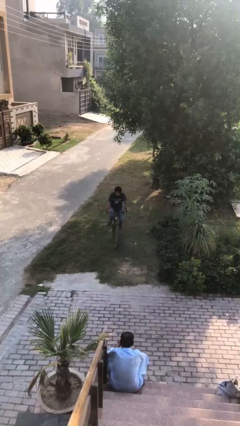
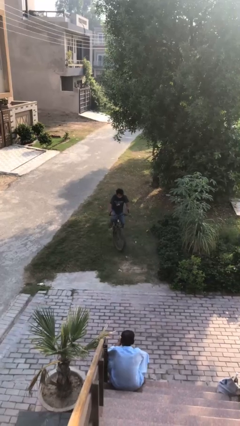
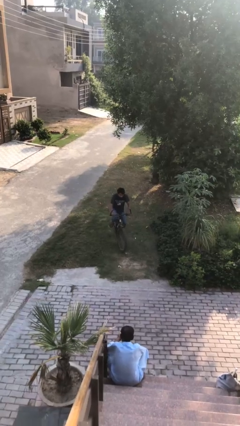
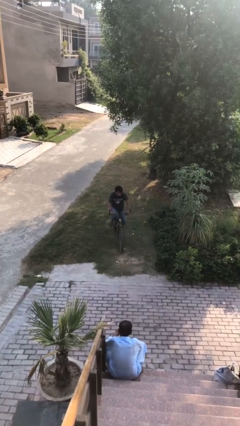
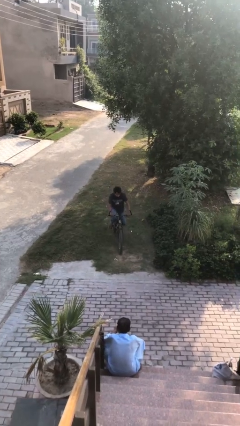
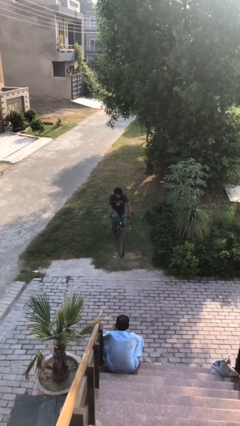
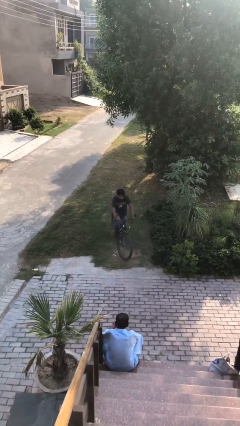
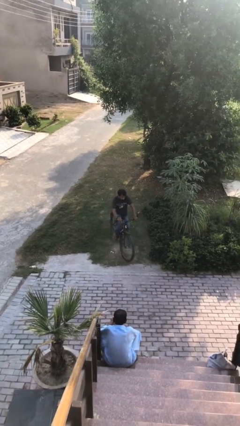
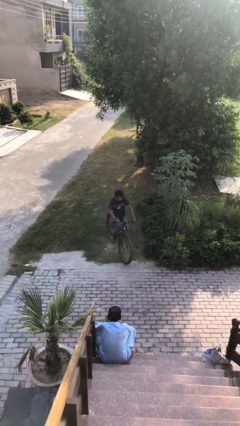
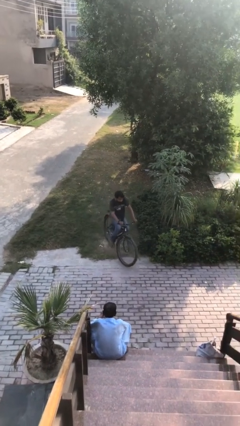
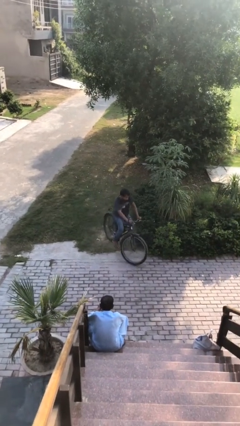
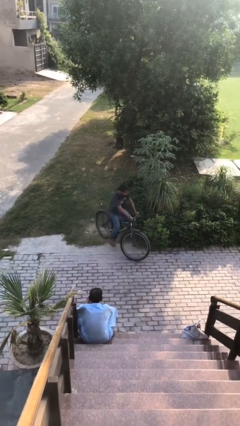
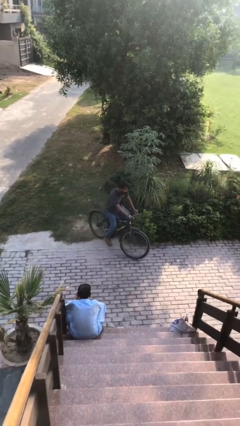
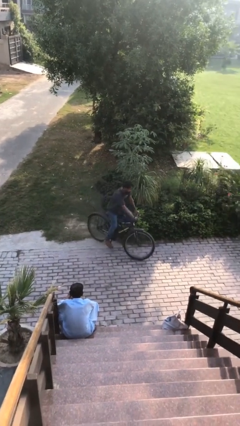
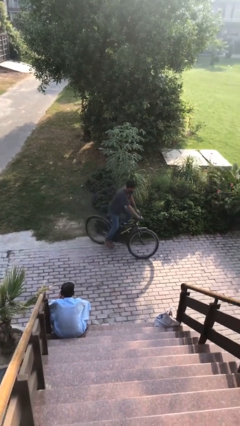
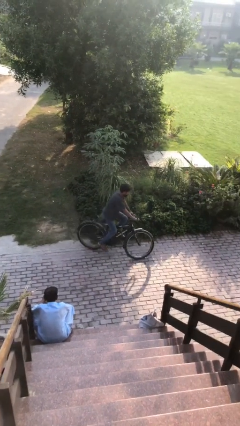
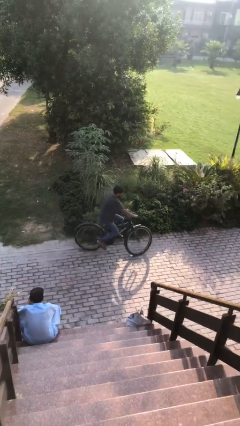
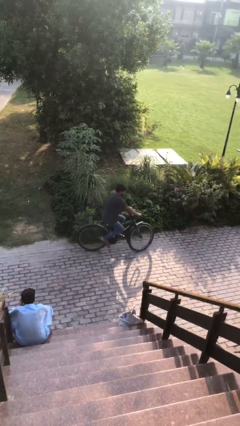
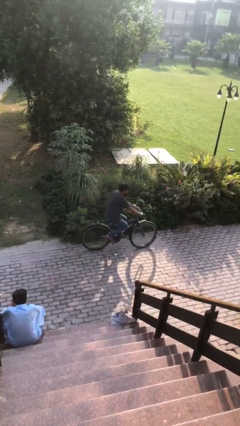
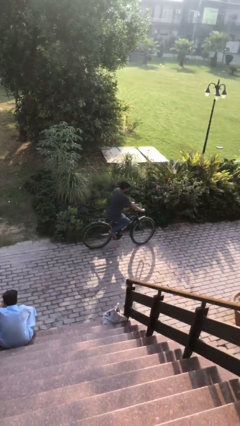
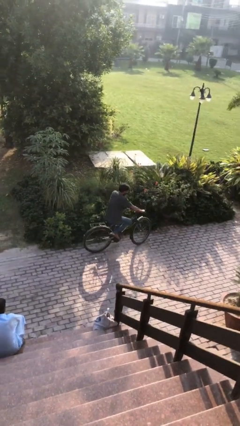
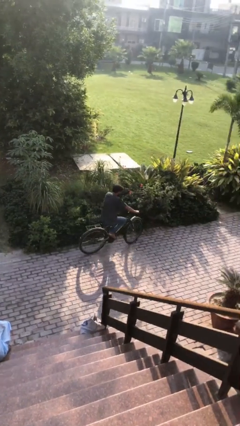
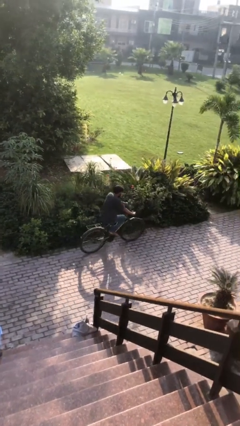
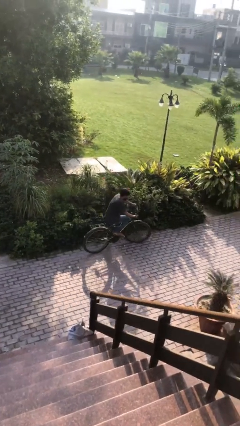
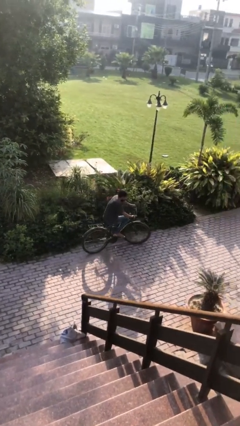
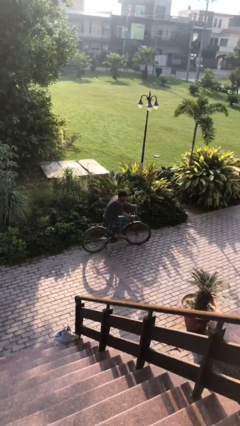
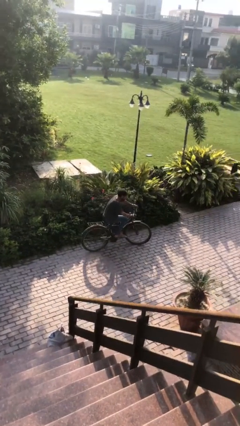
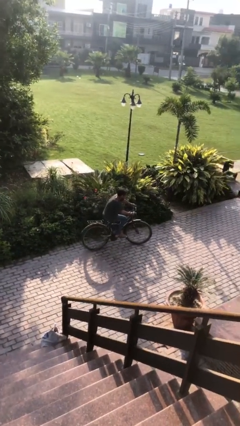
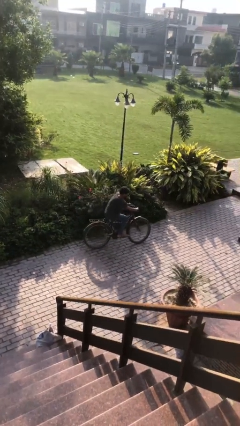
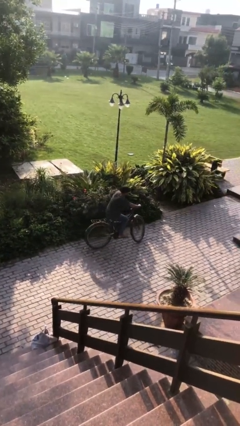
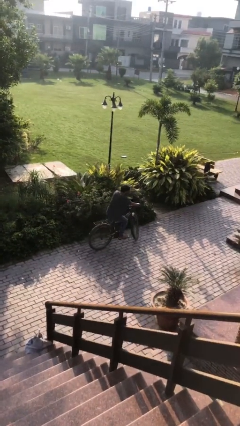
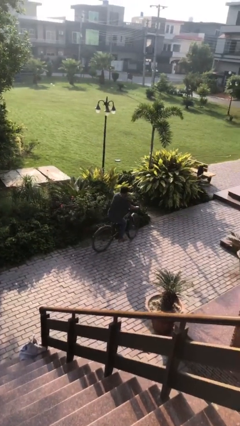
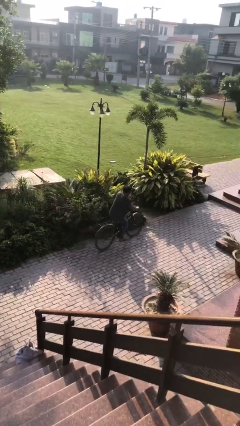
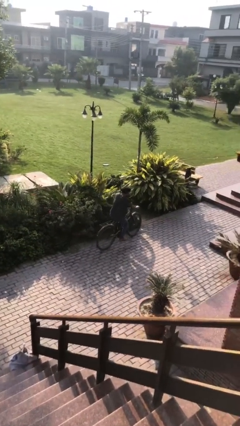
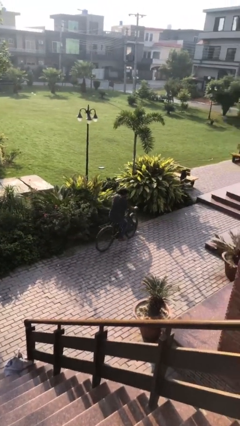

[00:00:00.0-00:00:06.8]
person rides bicycle

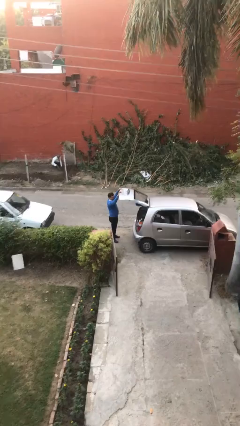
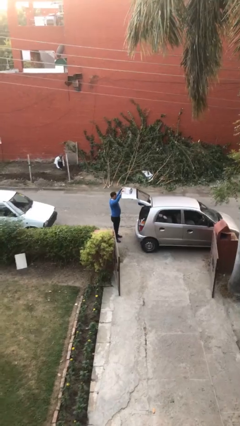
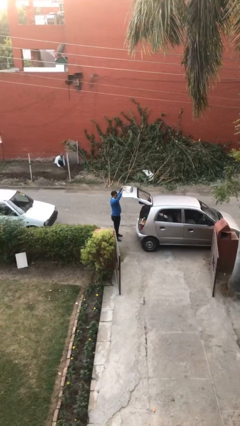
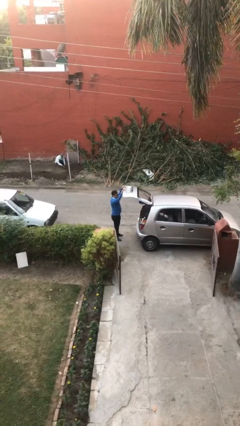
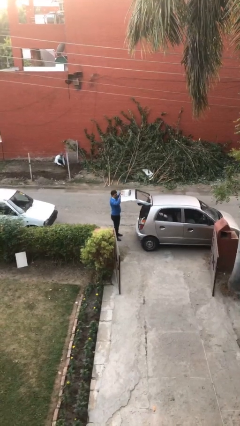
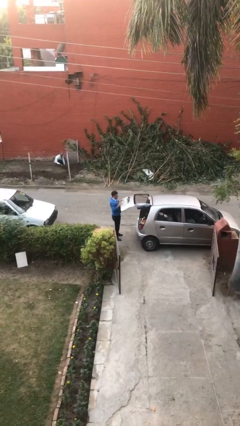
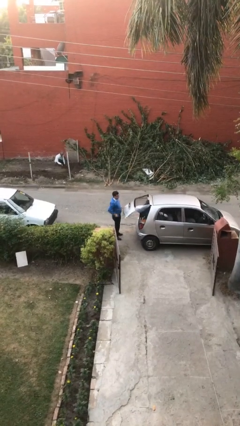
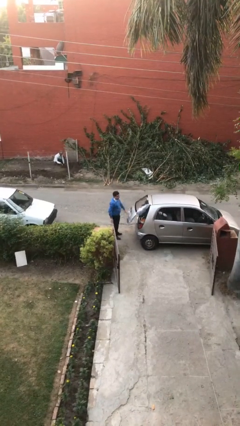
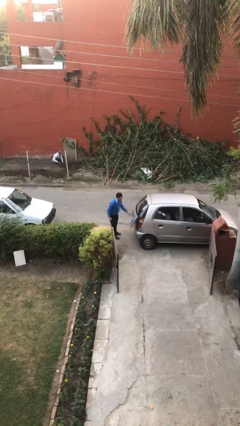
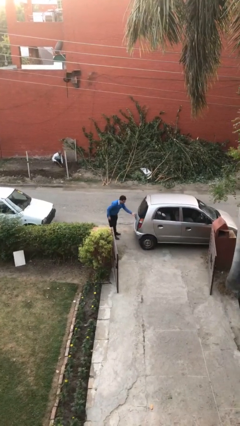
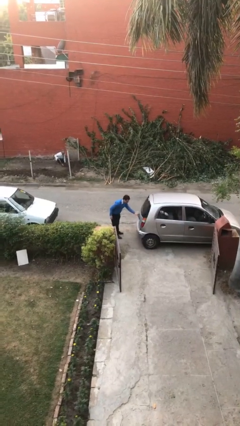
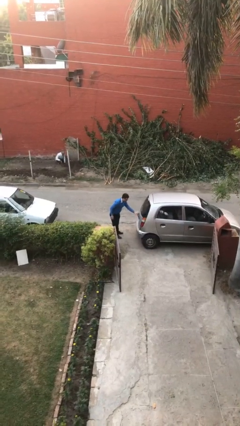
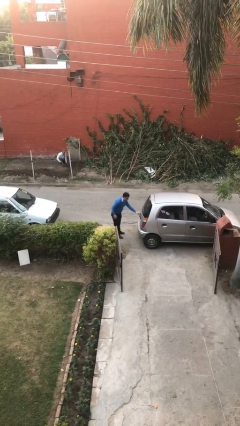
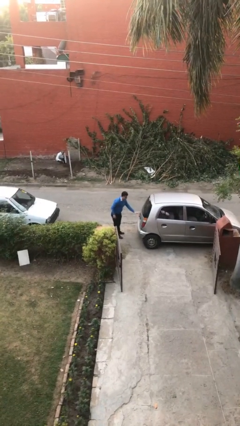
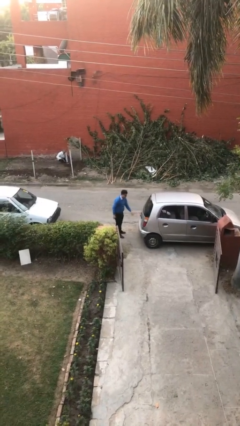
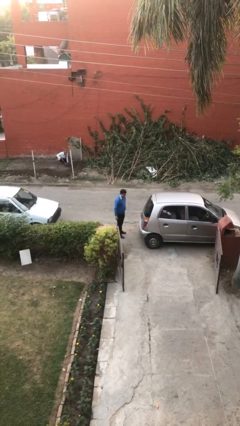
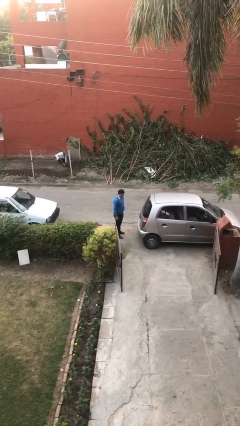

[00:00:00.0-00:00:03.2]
person closes car trunk

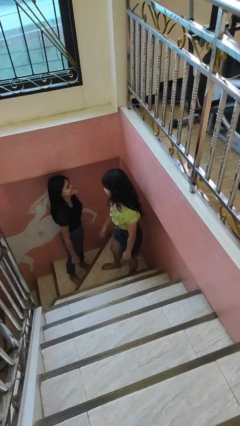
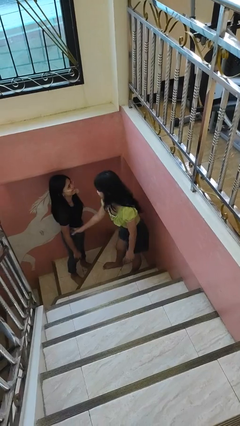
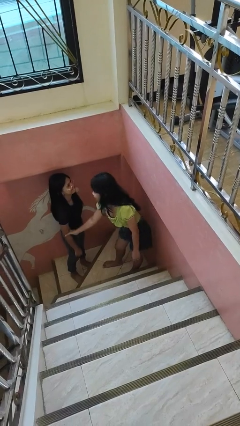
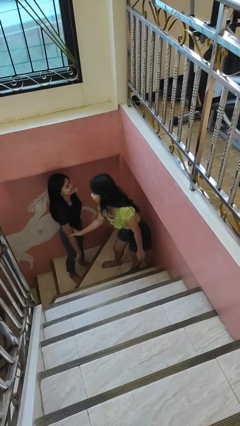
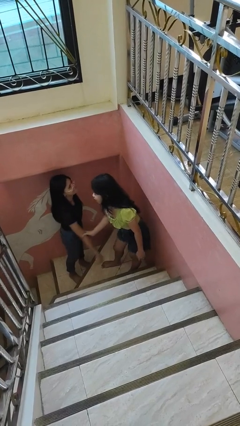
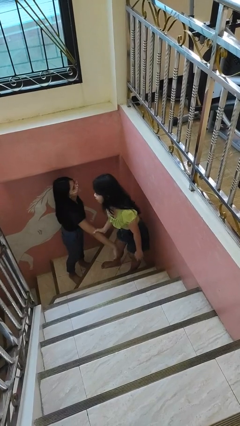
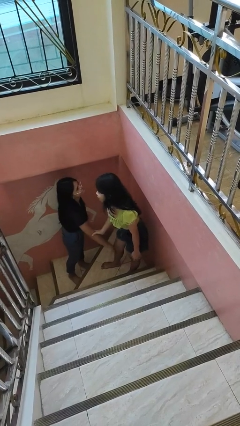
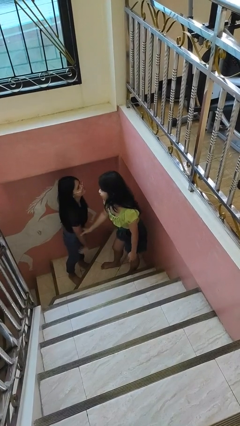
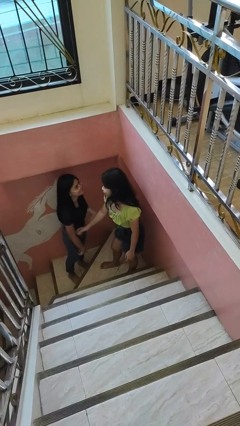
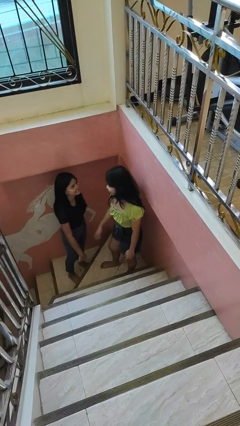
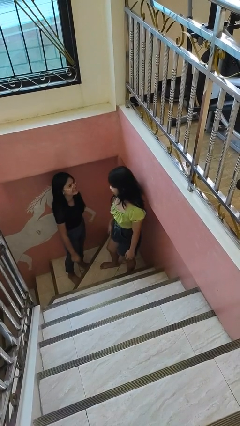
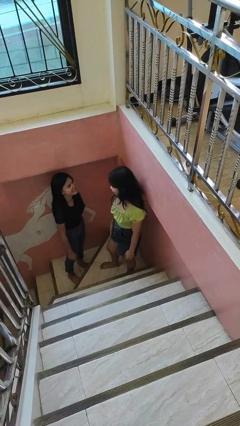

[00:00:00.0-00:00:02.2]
person grabs person by forearm

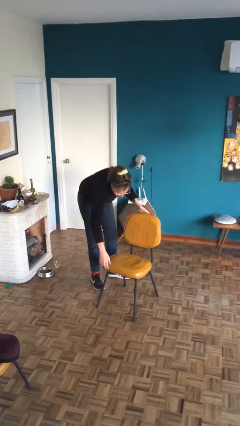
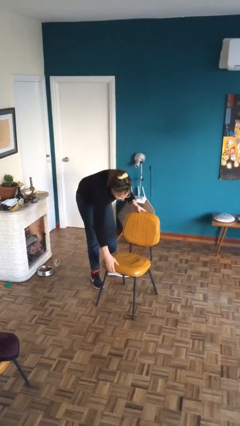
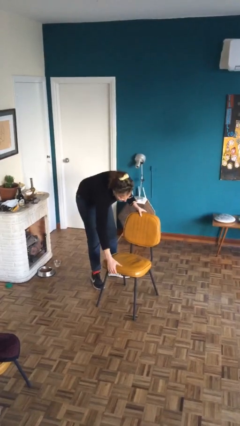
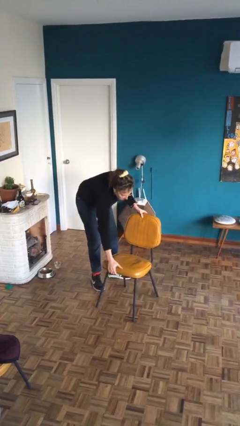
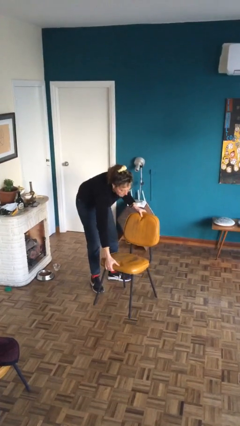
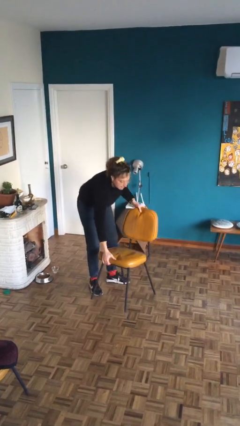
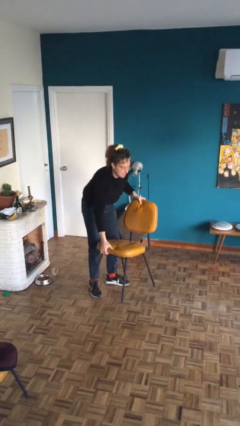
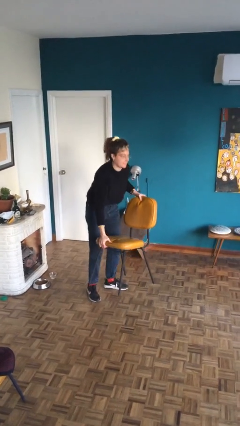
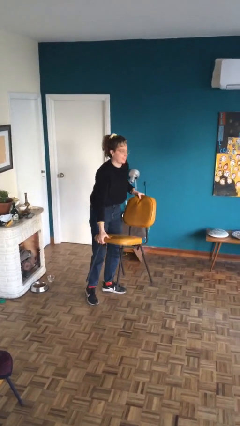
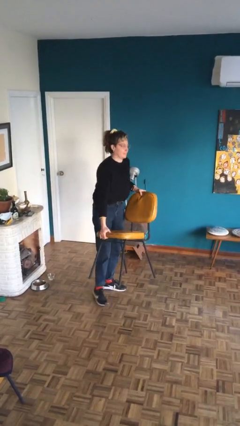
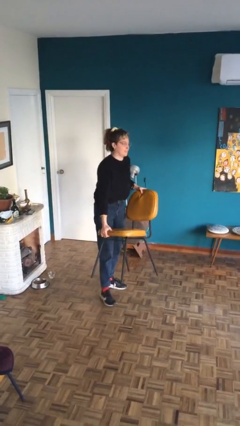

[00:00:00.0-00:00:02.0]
person picks up object from floor

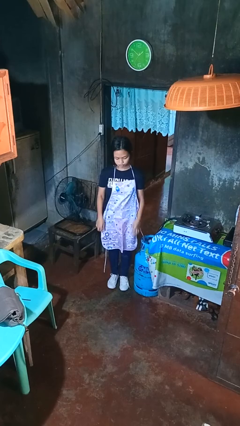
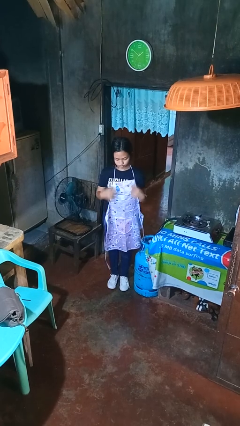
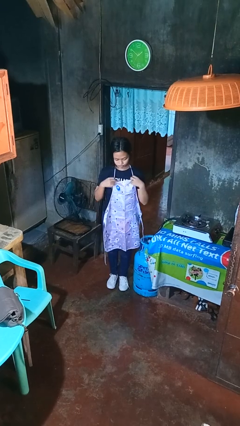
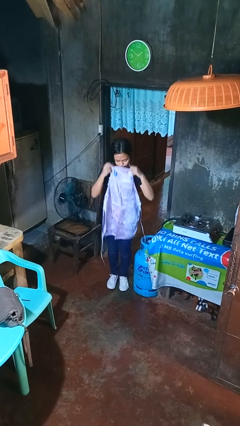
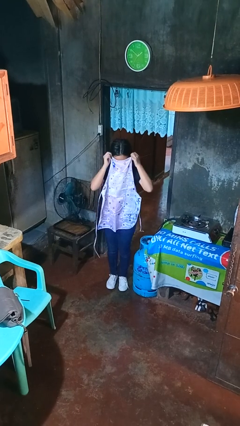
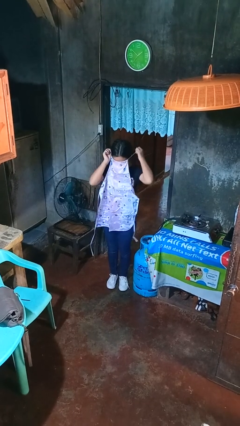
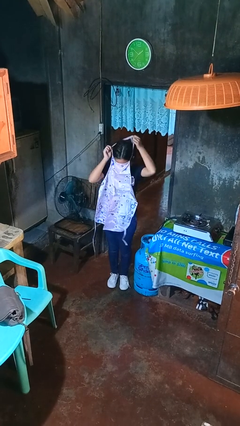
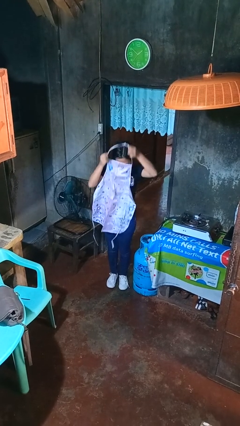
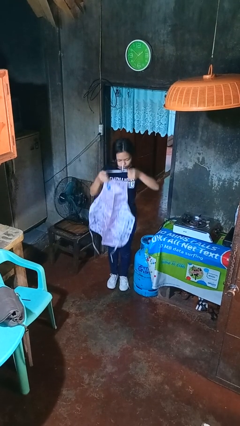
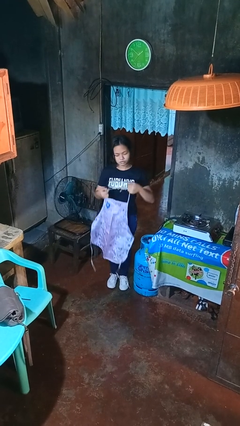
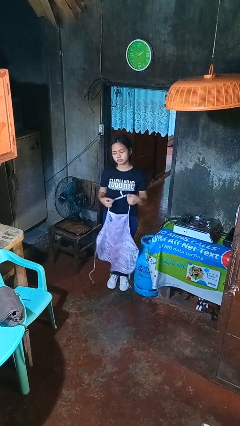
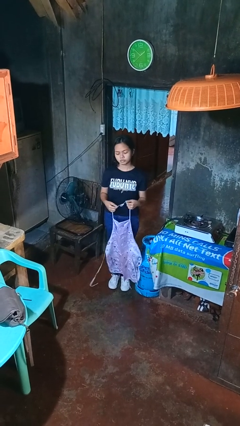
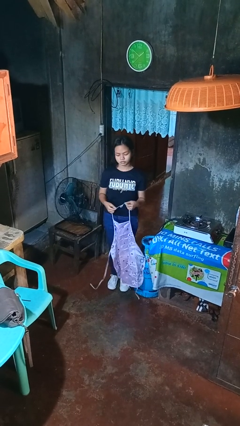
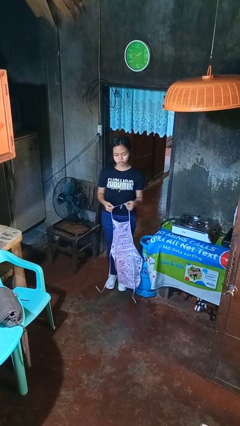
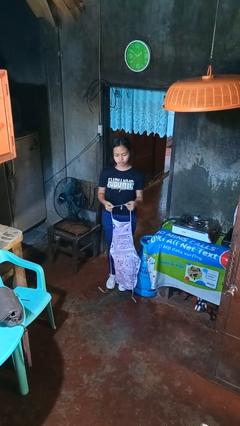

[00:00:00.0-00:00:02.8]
person takes off apron

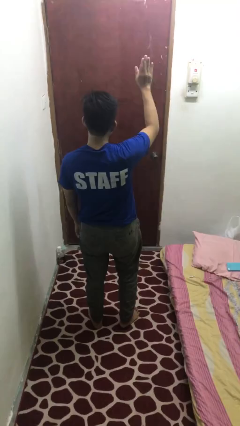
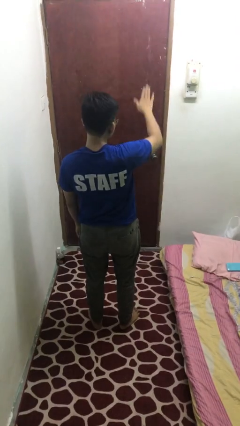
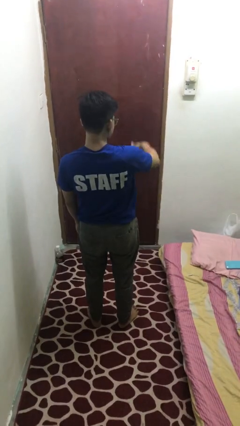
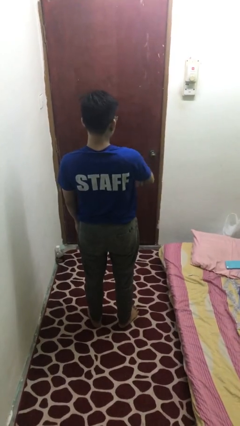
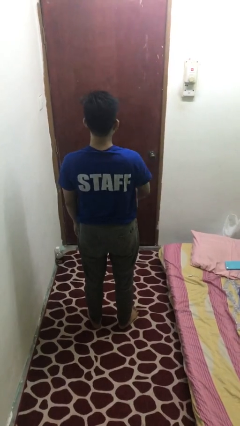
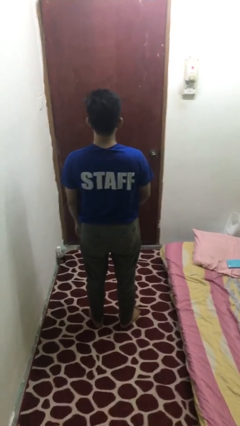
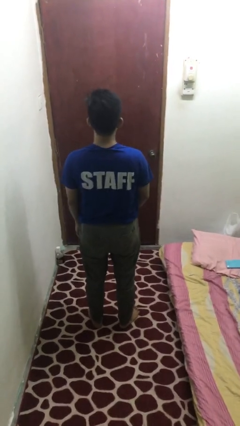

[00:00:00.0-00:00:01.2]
person gestures swipe down
